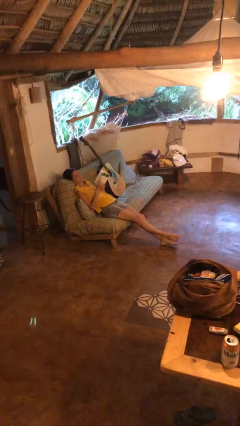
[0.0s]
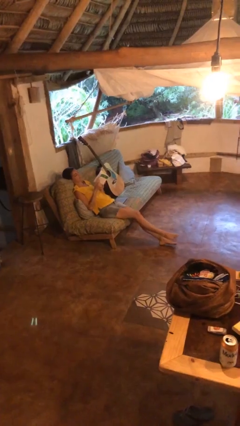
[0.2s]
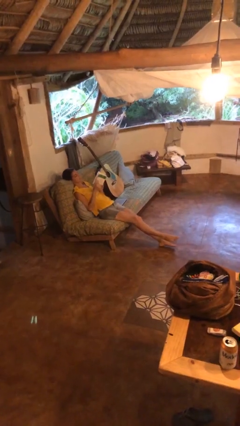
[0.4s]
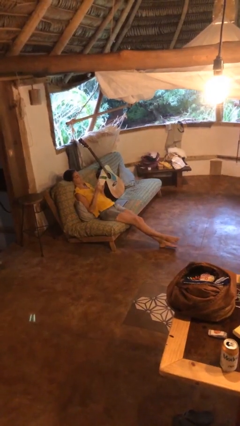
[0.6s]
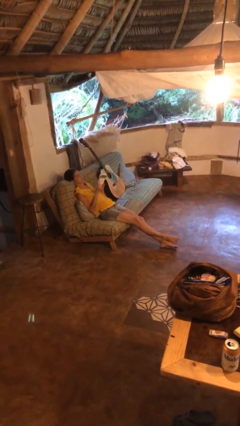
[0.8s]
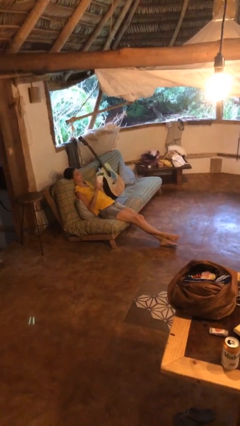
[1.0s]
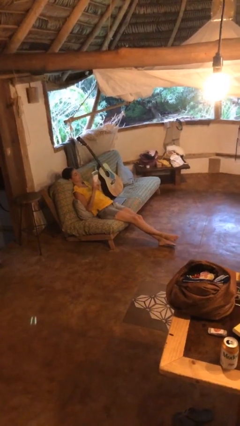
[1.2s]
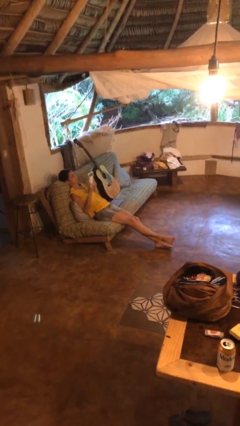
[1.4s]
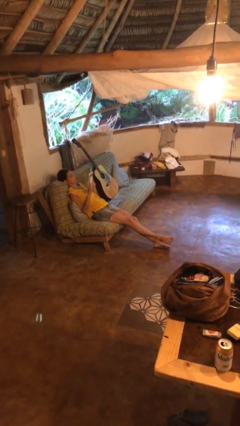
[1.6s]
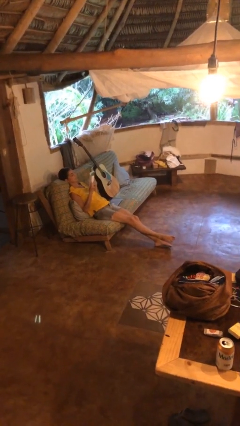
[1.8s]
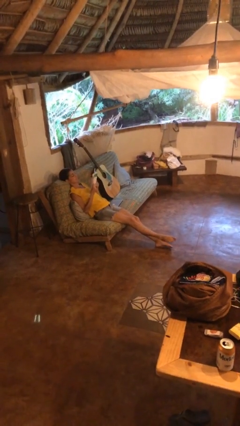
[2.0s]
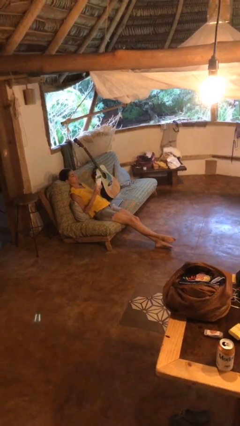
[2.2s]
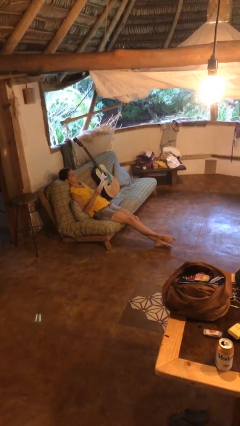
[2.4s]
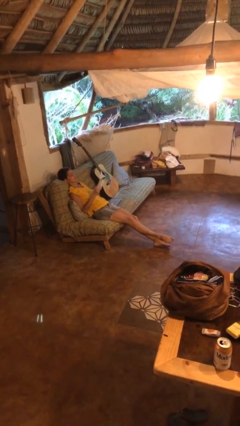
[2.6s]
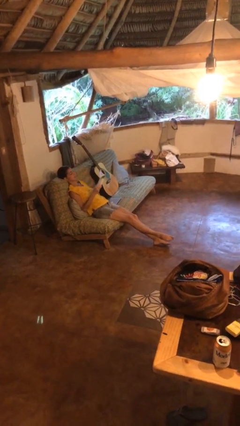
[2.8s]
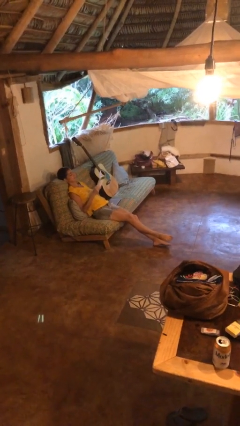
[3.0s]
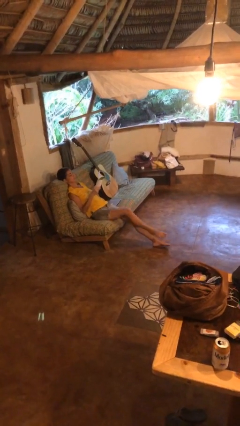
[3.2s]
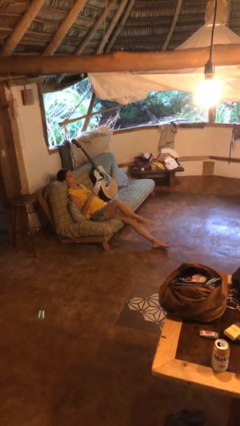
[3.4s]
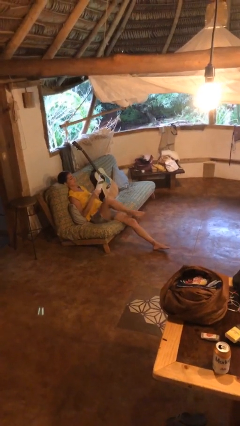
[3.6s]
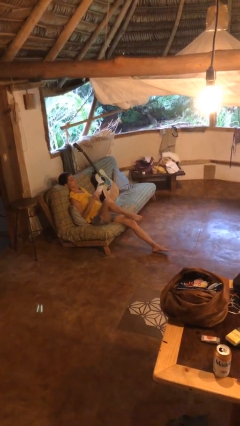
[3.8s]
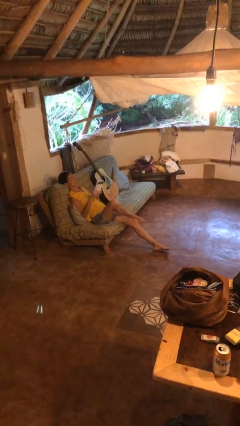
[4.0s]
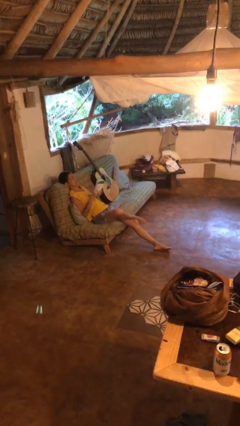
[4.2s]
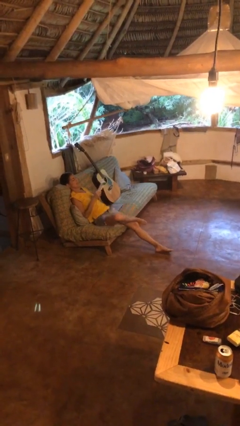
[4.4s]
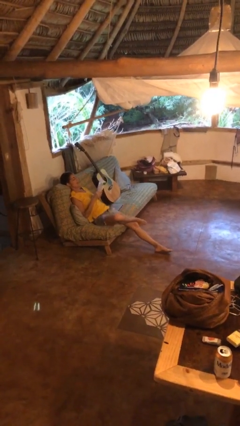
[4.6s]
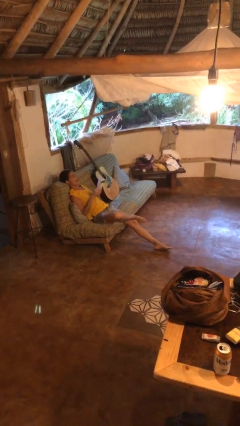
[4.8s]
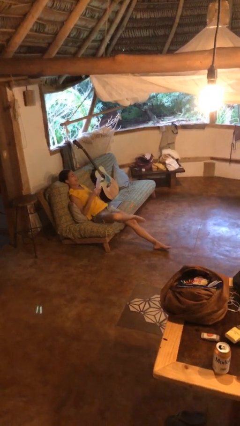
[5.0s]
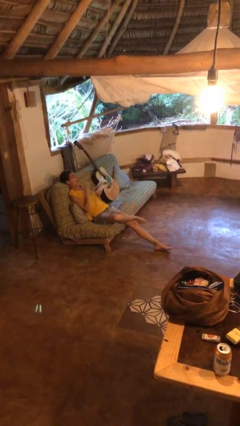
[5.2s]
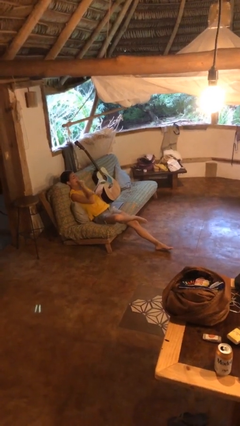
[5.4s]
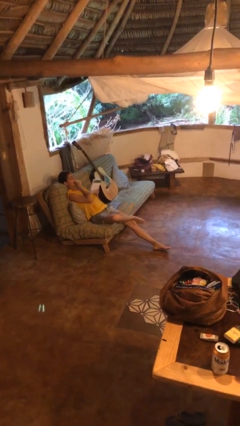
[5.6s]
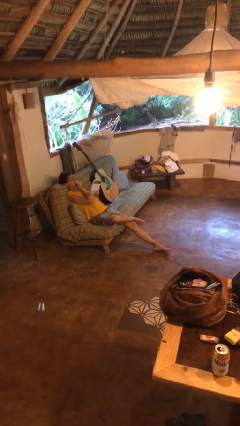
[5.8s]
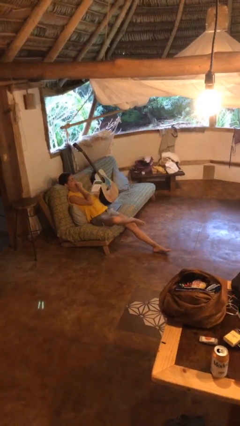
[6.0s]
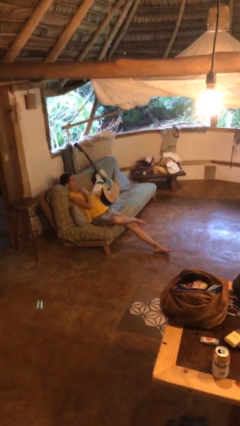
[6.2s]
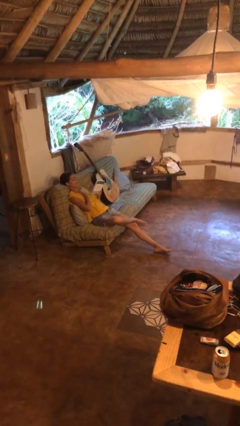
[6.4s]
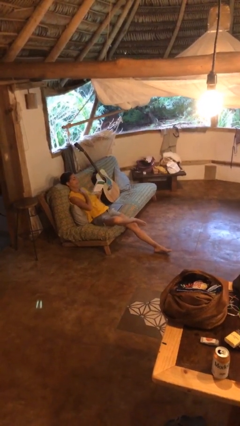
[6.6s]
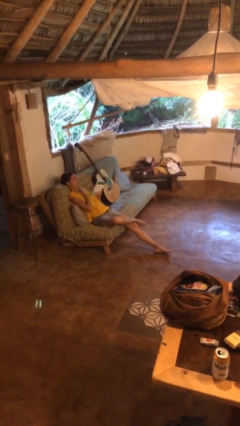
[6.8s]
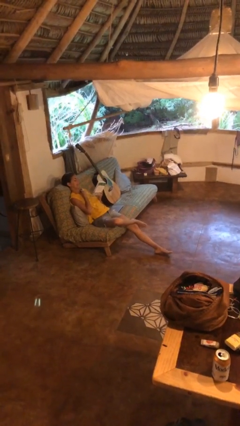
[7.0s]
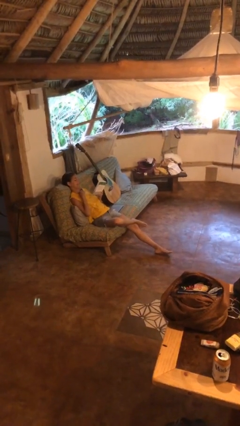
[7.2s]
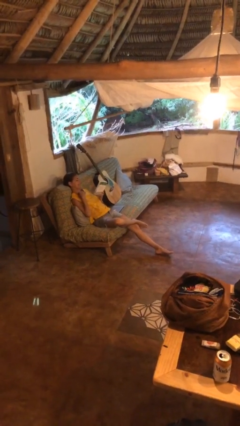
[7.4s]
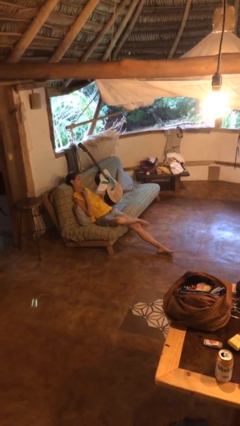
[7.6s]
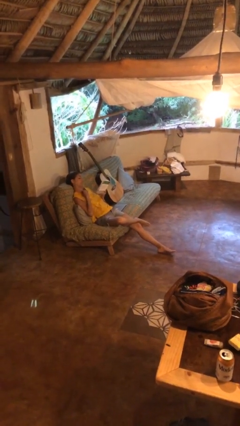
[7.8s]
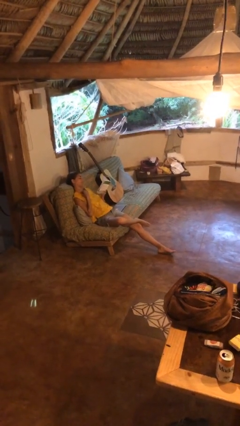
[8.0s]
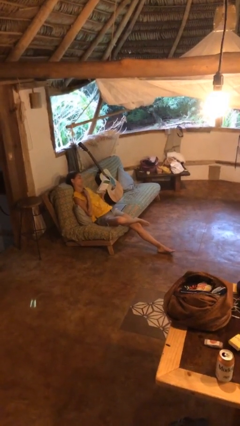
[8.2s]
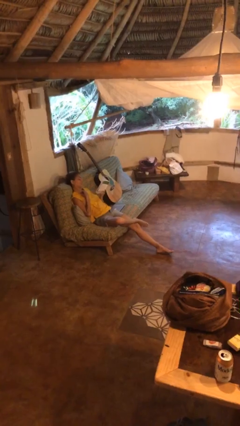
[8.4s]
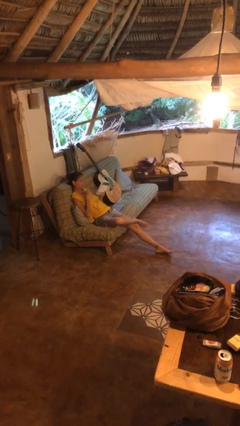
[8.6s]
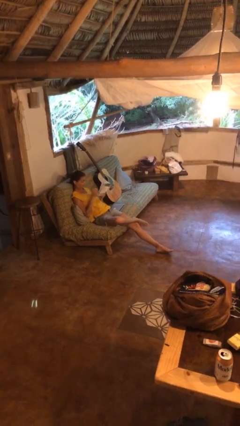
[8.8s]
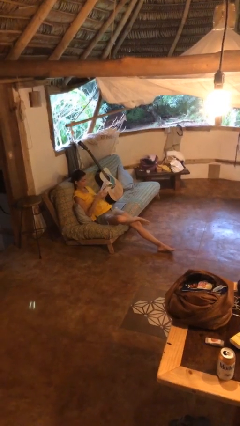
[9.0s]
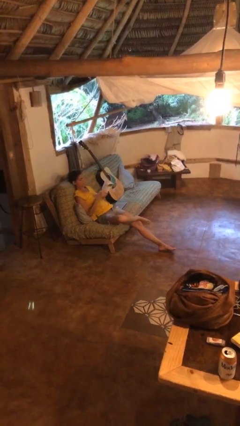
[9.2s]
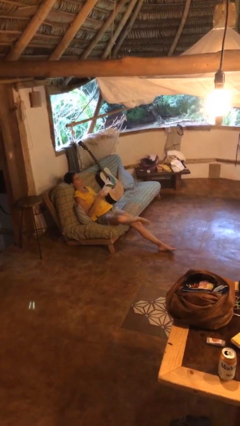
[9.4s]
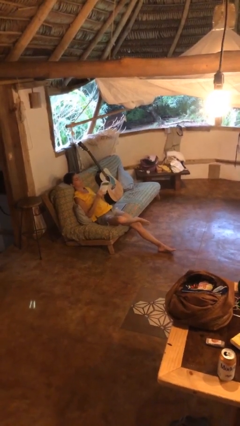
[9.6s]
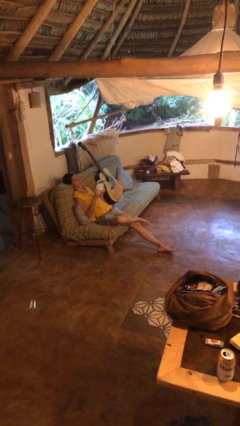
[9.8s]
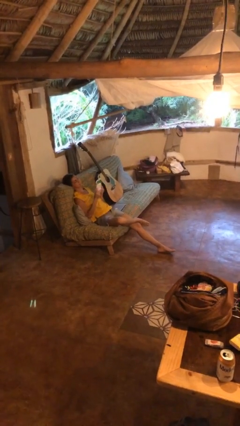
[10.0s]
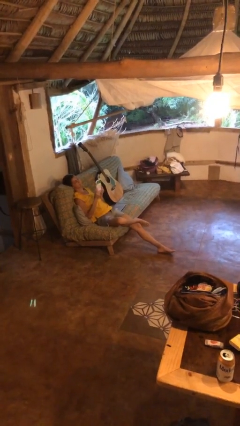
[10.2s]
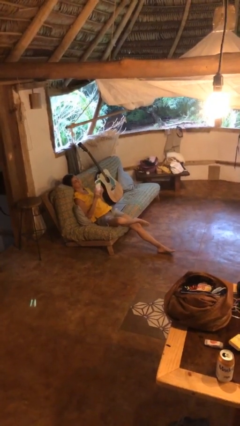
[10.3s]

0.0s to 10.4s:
person reads document

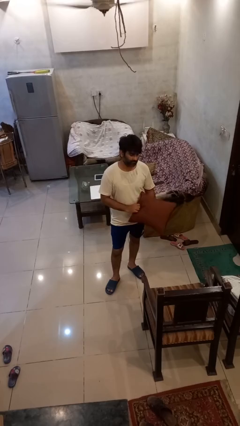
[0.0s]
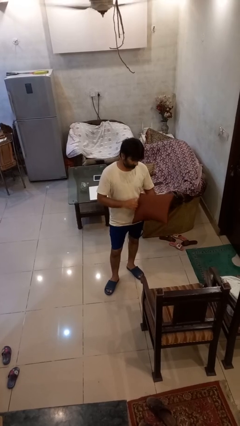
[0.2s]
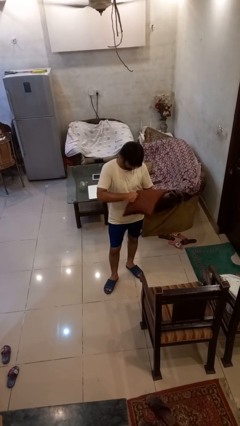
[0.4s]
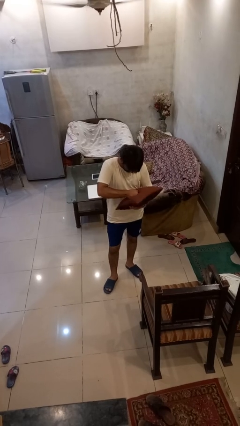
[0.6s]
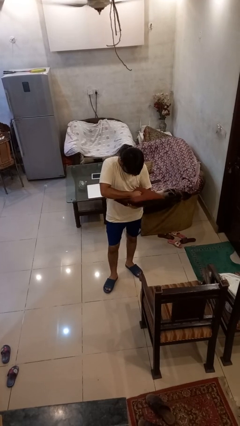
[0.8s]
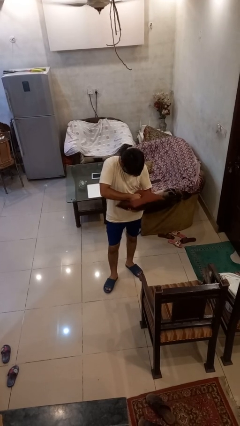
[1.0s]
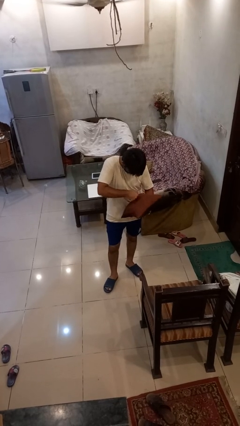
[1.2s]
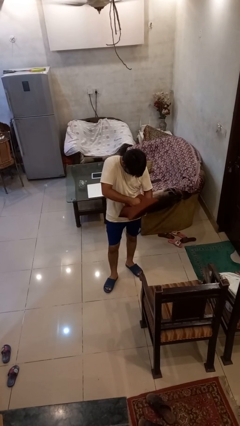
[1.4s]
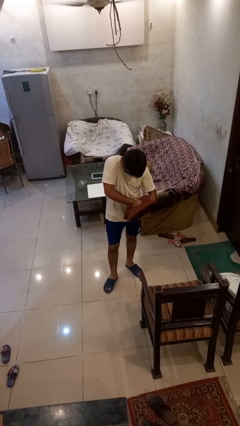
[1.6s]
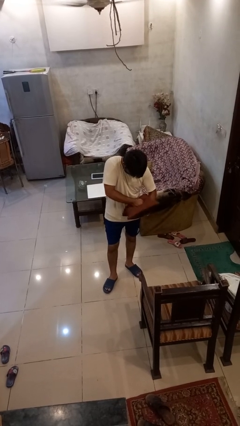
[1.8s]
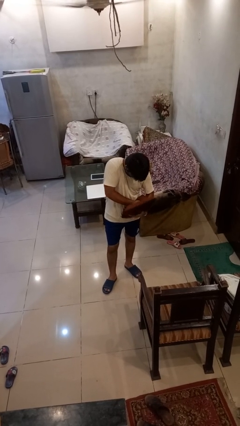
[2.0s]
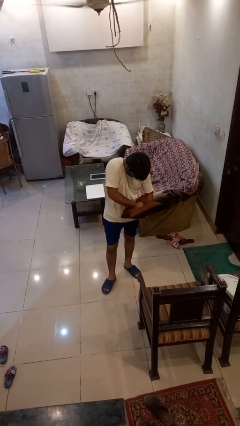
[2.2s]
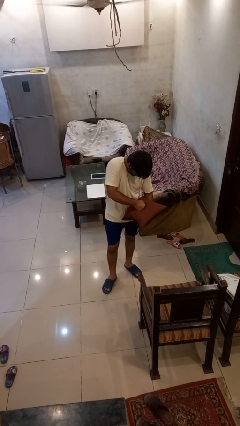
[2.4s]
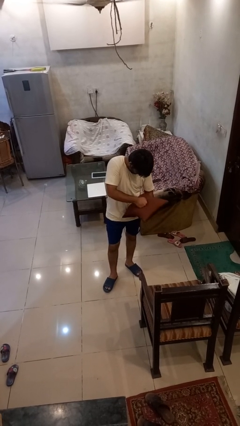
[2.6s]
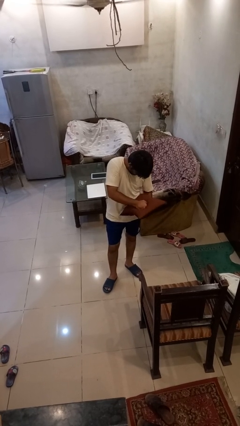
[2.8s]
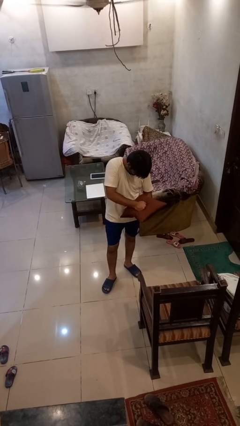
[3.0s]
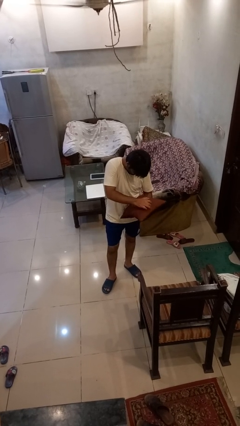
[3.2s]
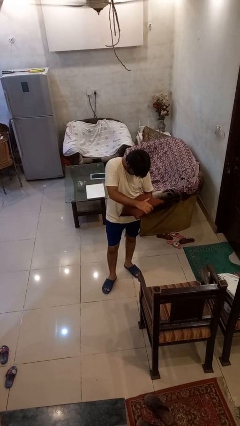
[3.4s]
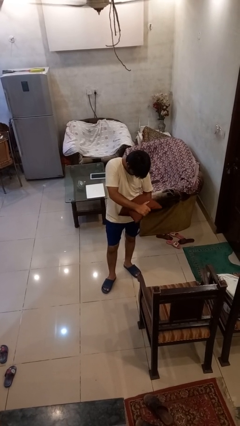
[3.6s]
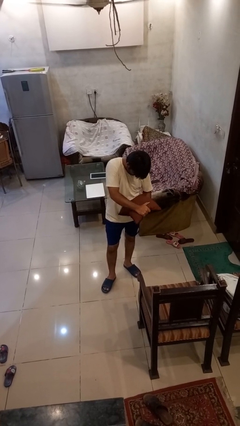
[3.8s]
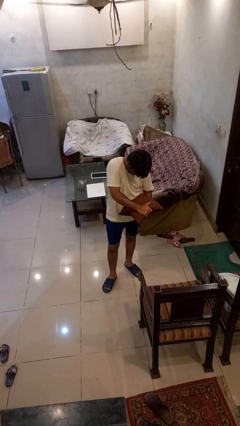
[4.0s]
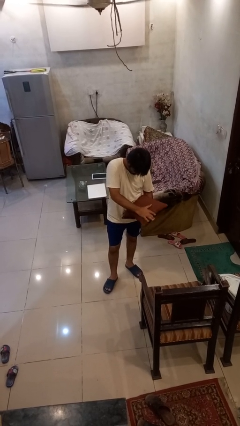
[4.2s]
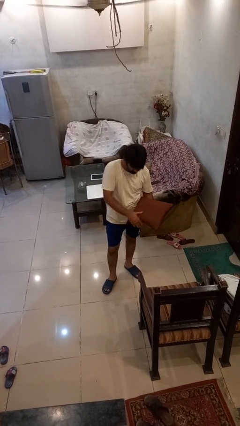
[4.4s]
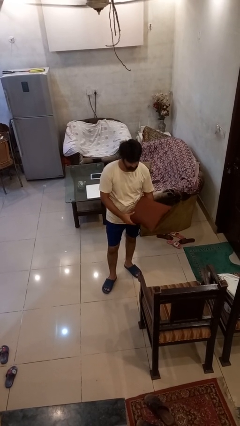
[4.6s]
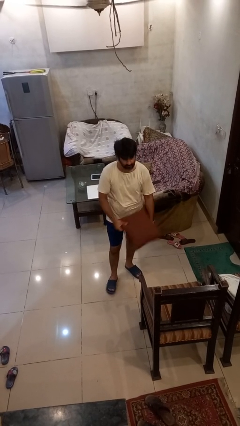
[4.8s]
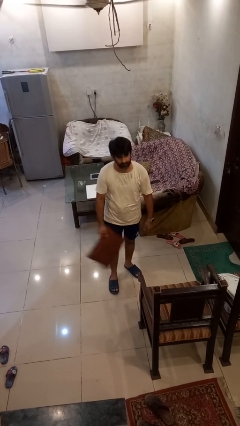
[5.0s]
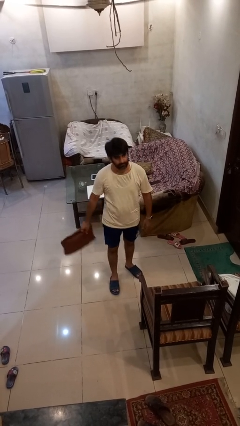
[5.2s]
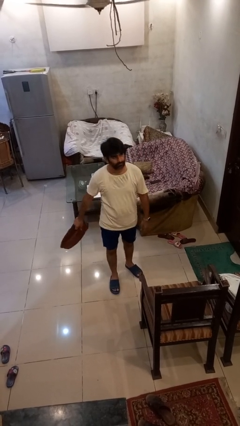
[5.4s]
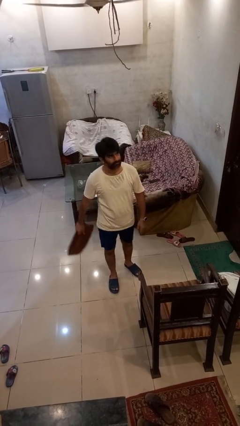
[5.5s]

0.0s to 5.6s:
person squeezes object

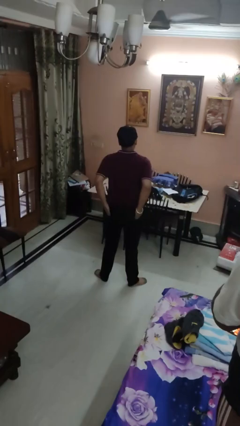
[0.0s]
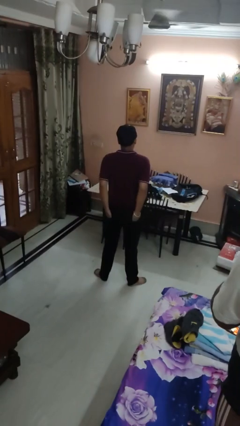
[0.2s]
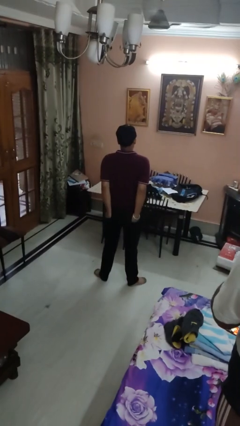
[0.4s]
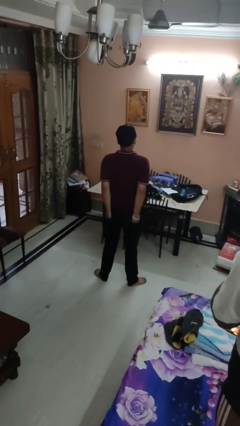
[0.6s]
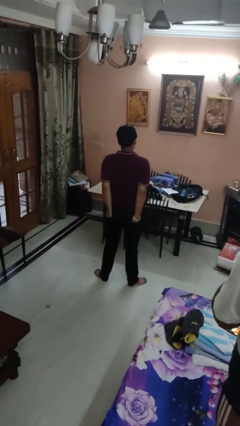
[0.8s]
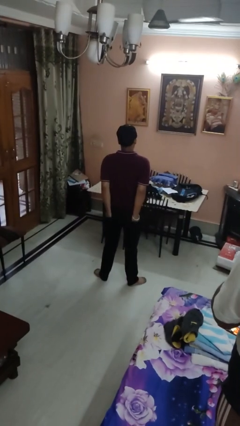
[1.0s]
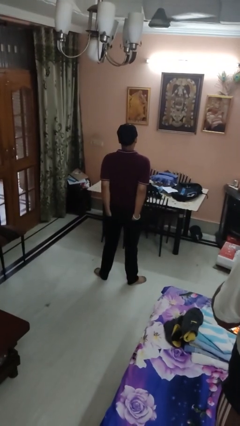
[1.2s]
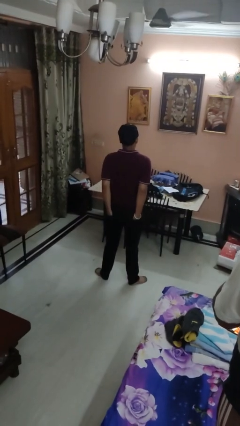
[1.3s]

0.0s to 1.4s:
person puts hands in back pockets

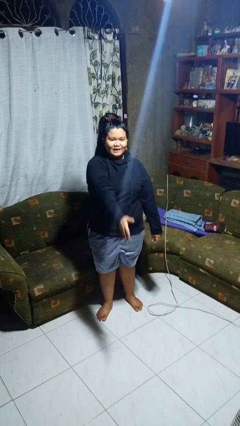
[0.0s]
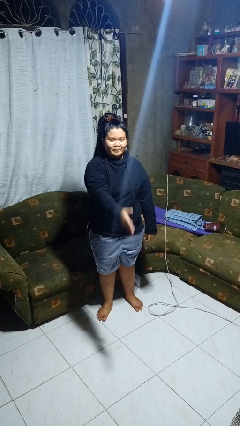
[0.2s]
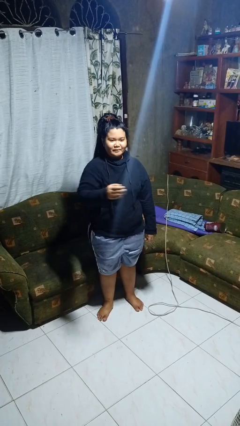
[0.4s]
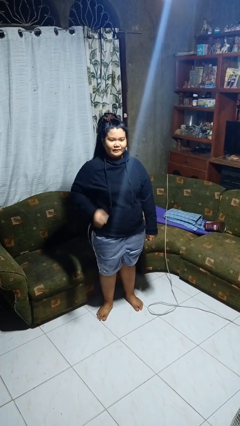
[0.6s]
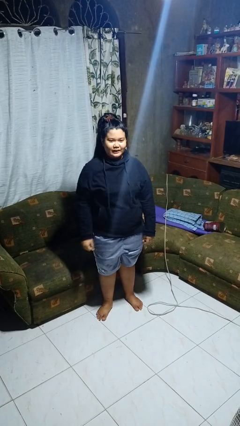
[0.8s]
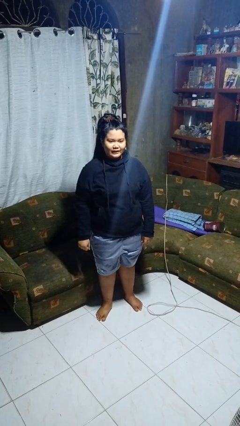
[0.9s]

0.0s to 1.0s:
person karate chop
